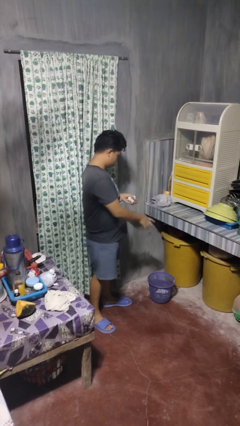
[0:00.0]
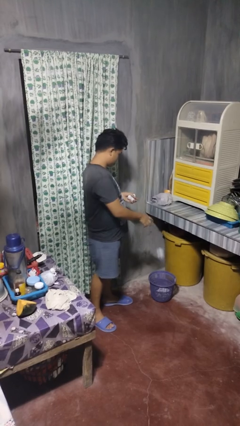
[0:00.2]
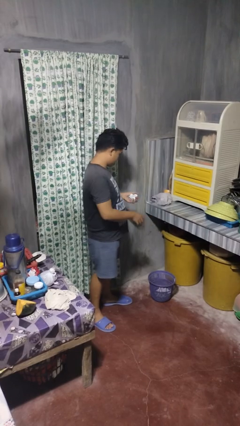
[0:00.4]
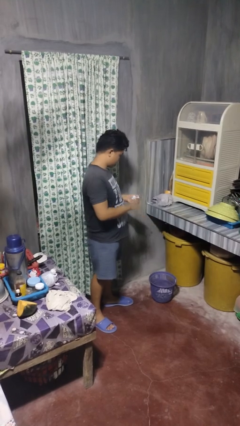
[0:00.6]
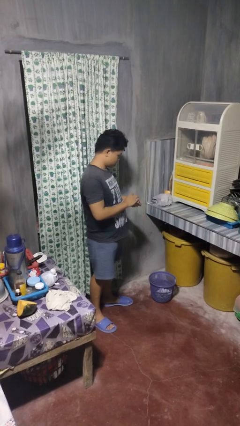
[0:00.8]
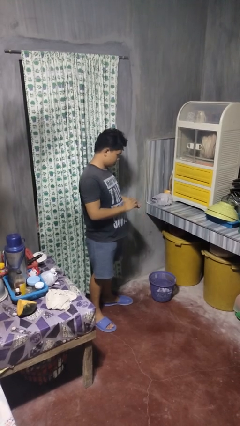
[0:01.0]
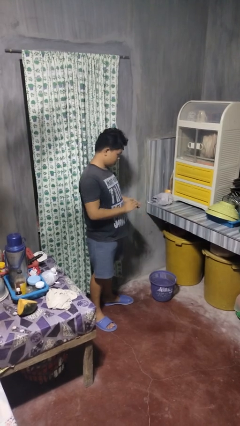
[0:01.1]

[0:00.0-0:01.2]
person discards trash

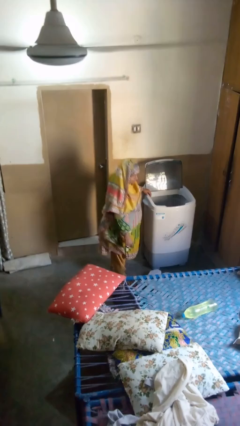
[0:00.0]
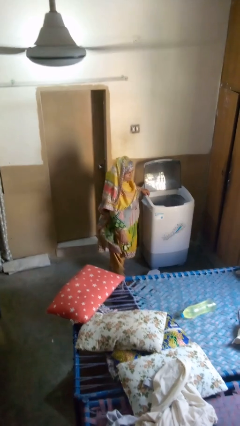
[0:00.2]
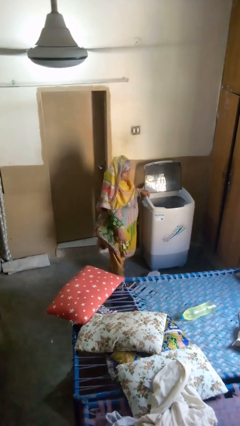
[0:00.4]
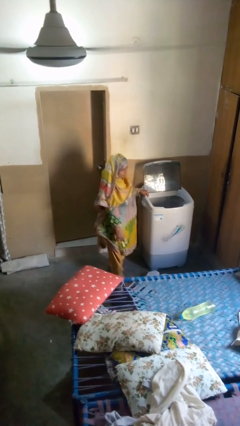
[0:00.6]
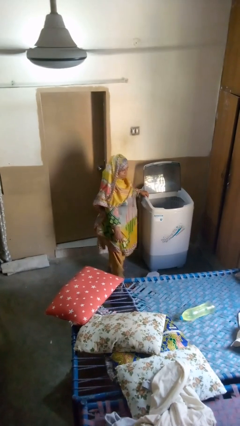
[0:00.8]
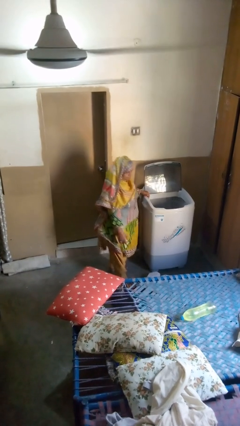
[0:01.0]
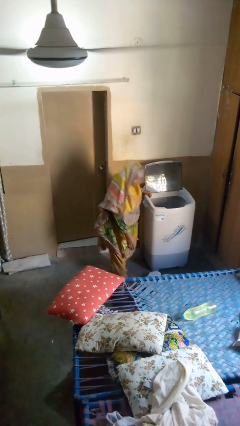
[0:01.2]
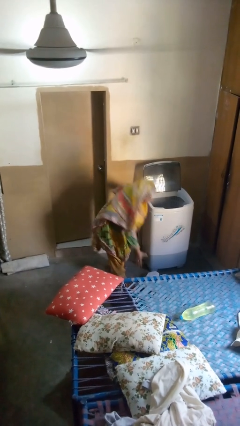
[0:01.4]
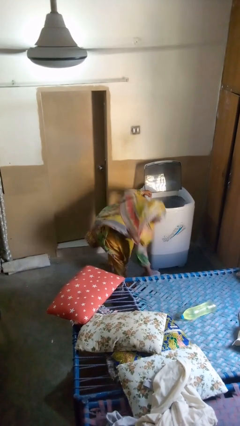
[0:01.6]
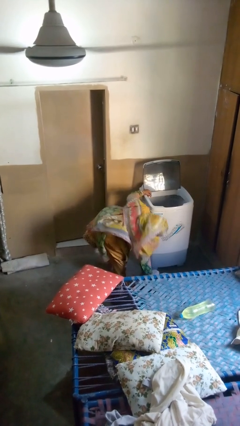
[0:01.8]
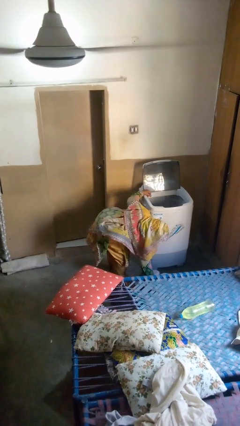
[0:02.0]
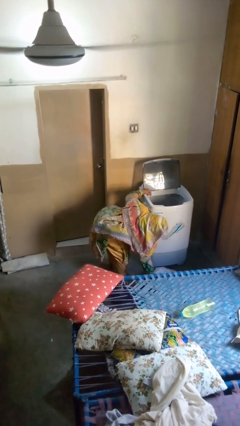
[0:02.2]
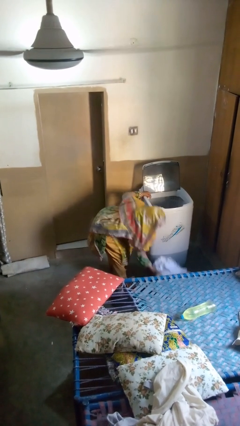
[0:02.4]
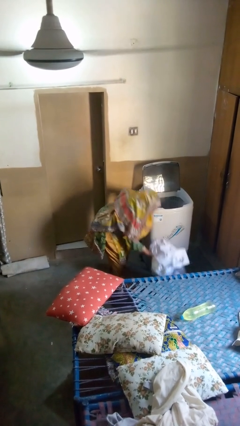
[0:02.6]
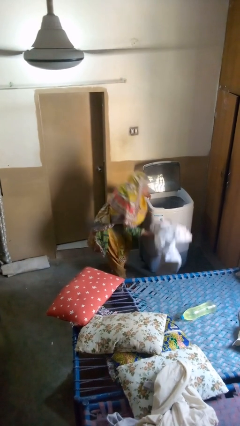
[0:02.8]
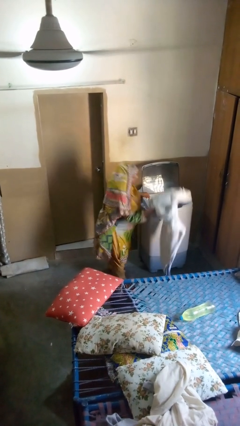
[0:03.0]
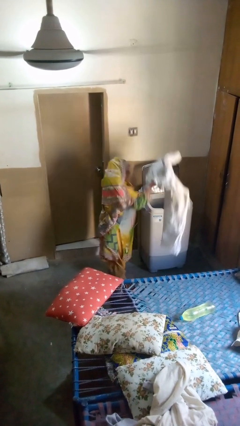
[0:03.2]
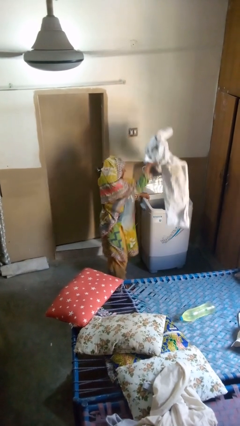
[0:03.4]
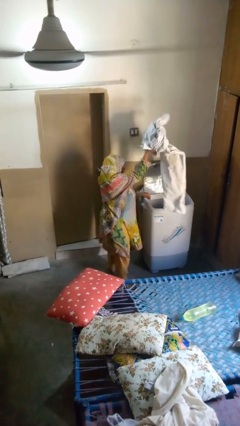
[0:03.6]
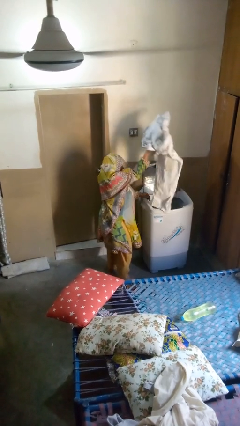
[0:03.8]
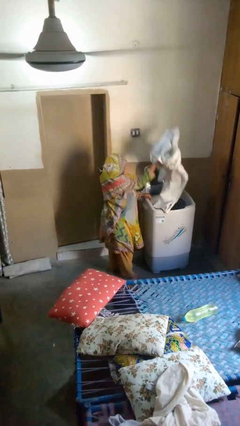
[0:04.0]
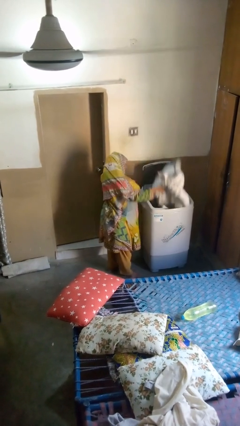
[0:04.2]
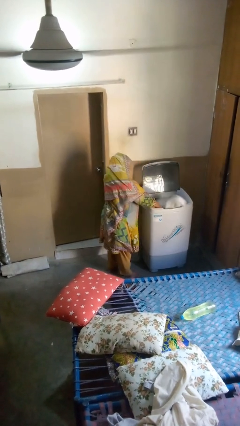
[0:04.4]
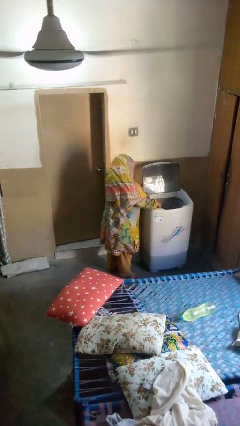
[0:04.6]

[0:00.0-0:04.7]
person loads clotheswasher

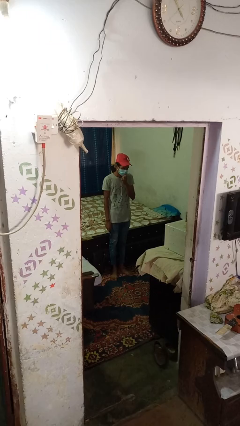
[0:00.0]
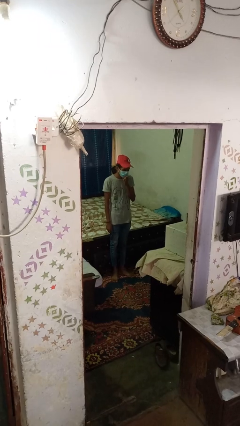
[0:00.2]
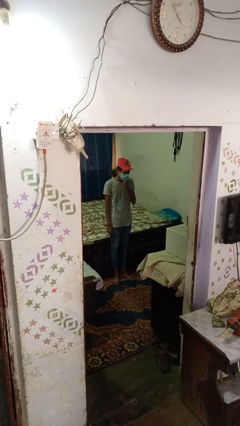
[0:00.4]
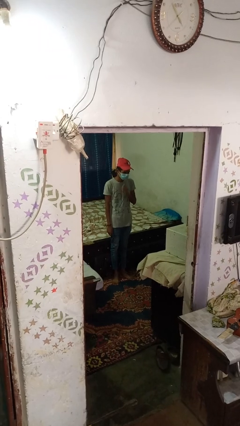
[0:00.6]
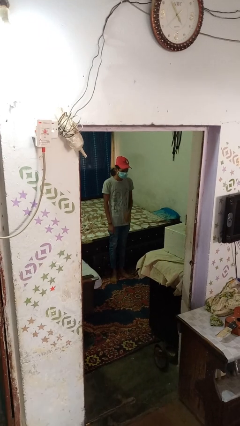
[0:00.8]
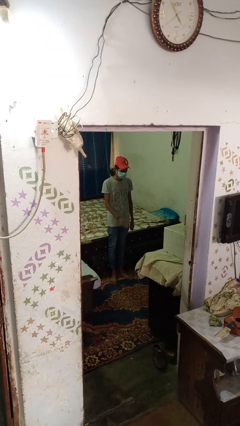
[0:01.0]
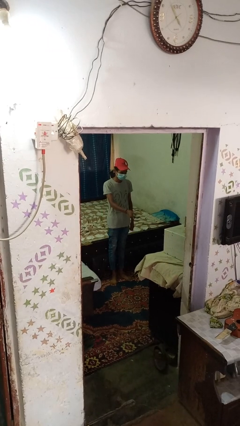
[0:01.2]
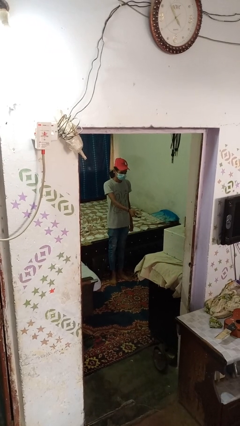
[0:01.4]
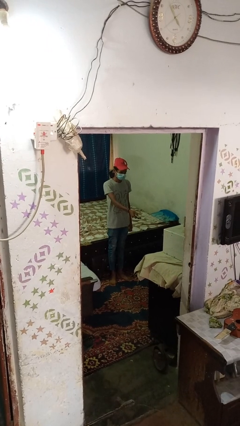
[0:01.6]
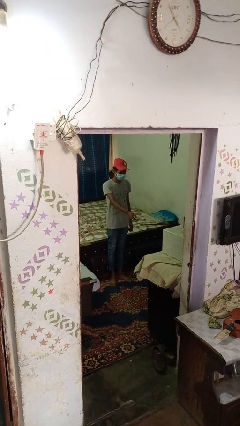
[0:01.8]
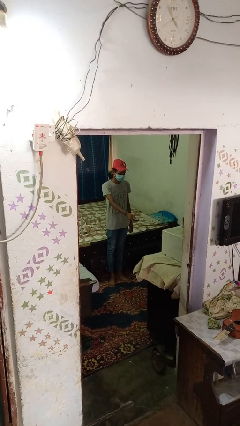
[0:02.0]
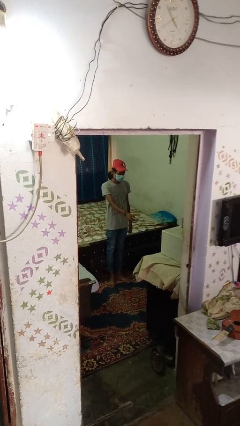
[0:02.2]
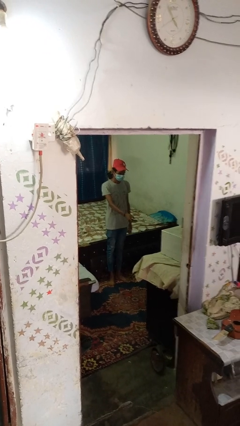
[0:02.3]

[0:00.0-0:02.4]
person uses television remote

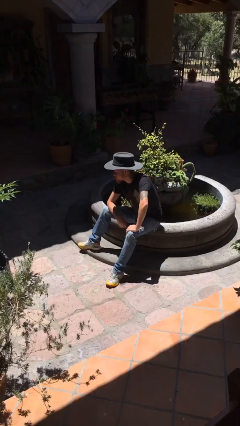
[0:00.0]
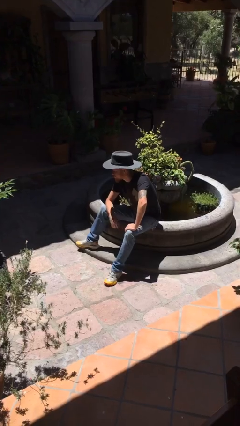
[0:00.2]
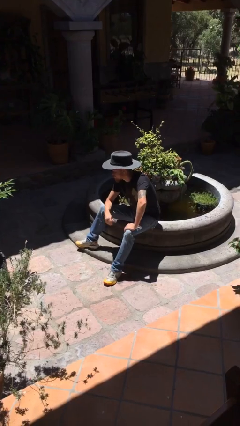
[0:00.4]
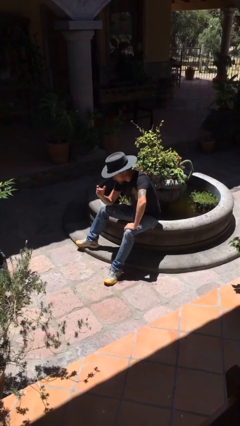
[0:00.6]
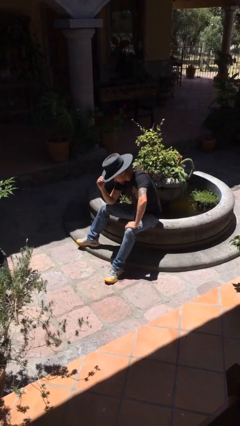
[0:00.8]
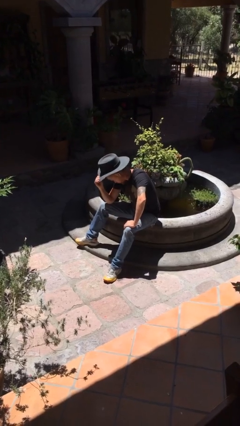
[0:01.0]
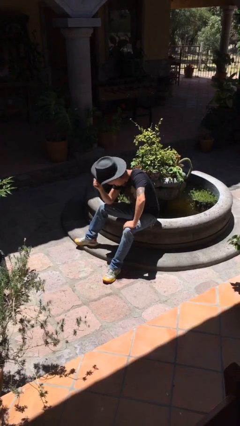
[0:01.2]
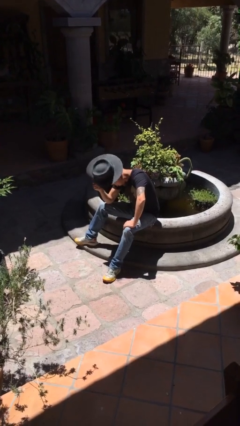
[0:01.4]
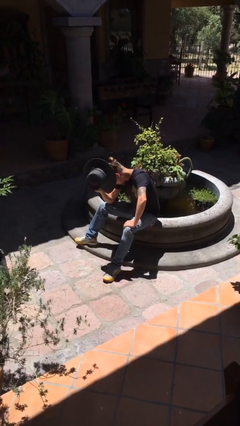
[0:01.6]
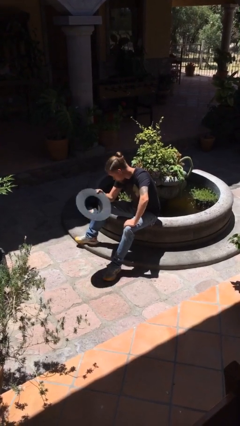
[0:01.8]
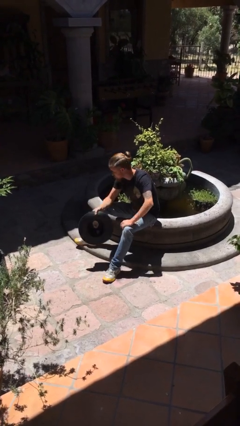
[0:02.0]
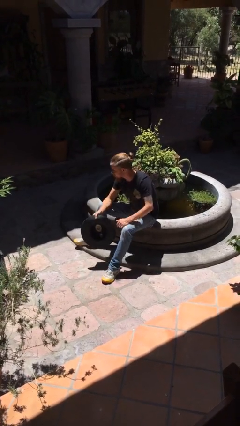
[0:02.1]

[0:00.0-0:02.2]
person takes off hat

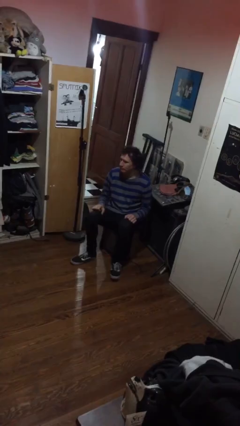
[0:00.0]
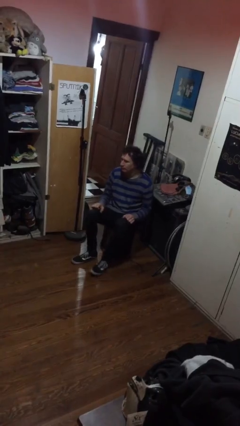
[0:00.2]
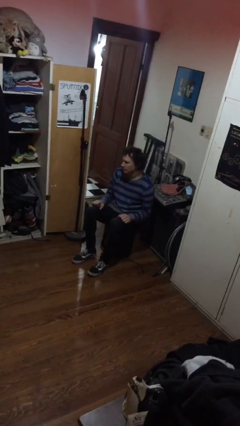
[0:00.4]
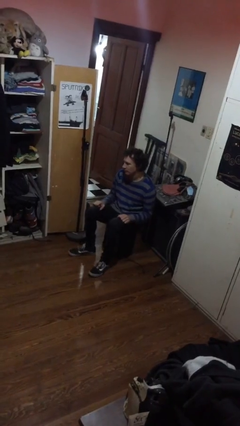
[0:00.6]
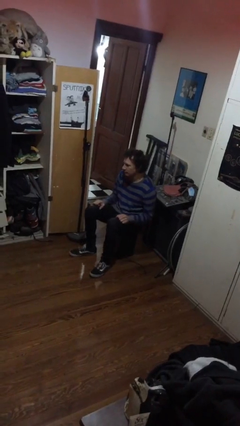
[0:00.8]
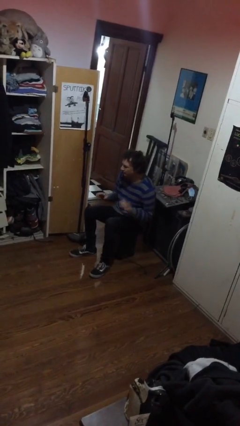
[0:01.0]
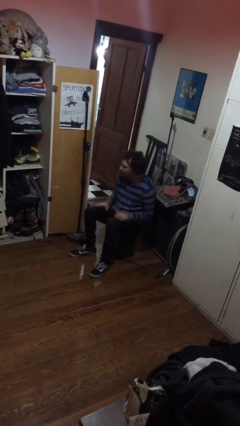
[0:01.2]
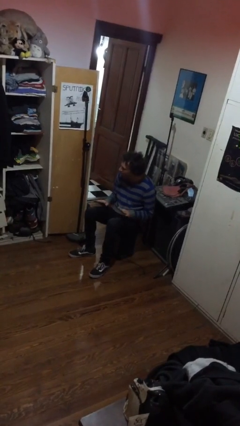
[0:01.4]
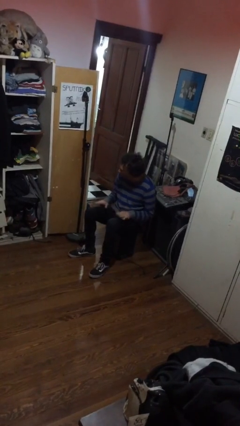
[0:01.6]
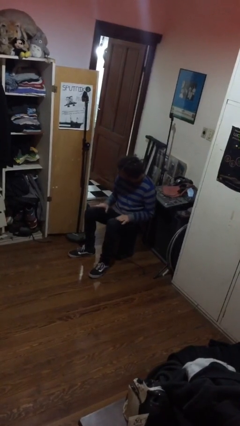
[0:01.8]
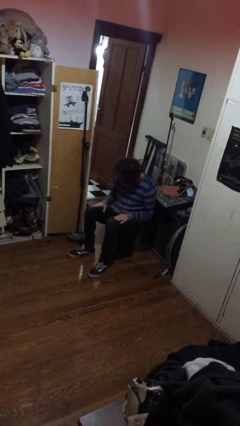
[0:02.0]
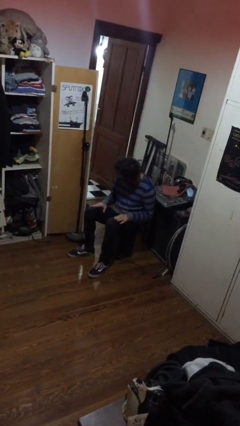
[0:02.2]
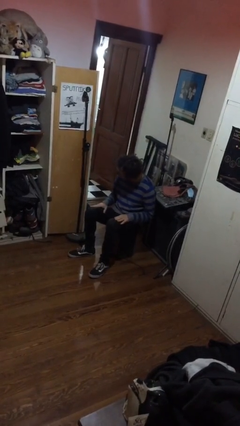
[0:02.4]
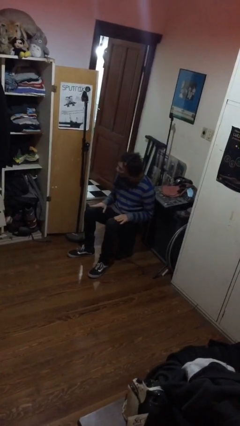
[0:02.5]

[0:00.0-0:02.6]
person slaps hands on thighs

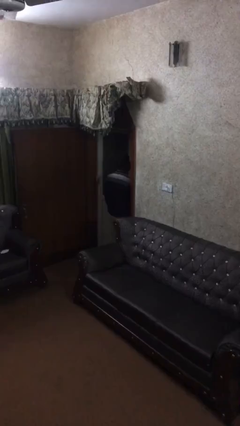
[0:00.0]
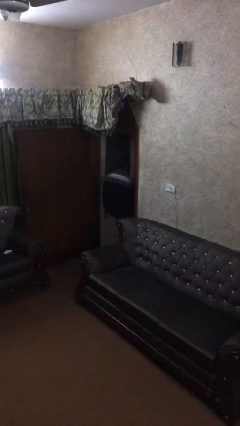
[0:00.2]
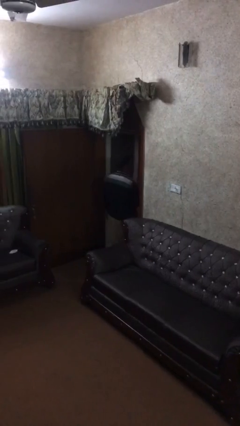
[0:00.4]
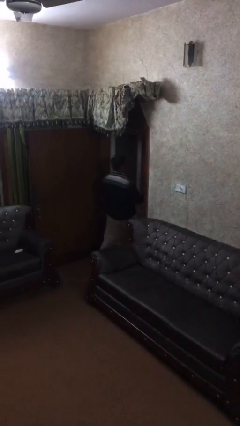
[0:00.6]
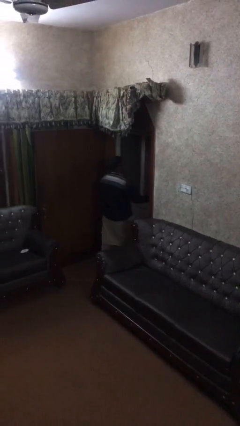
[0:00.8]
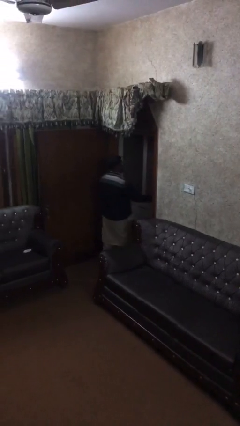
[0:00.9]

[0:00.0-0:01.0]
person closes facility door

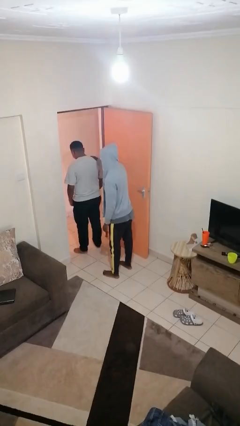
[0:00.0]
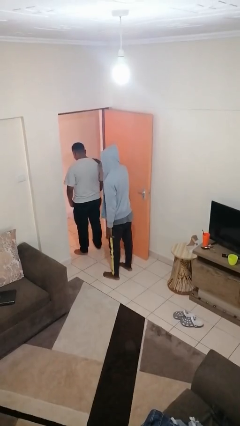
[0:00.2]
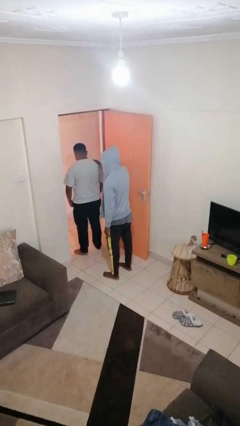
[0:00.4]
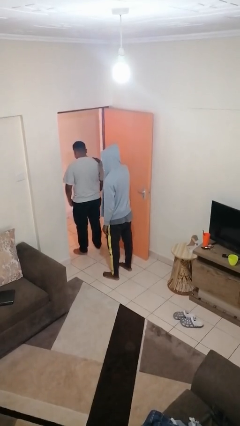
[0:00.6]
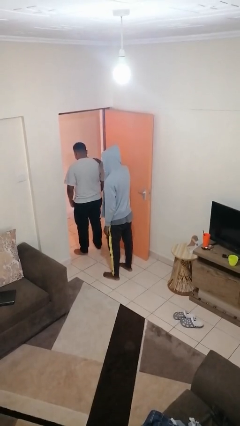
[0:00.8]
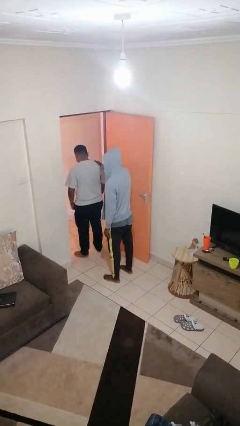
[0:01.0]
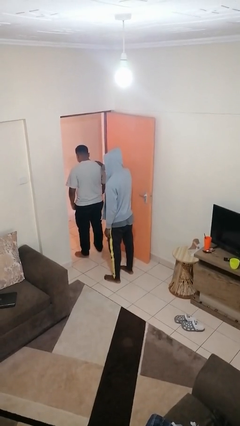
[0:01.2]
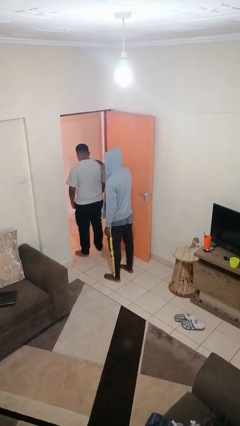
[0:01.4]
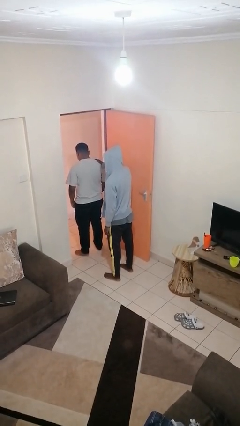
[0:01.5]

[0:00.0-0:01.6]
person grabs person by shoulder

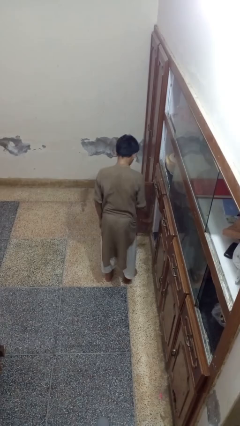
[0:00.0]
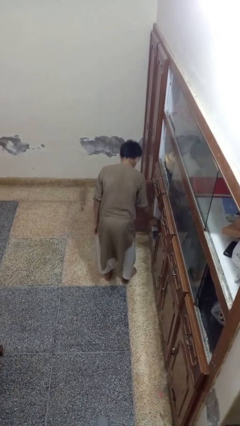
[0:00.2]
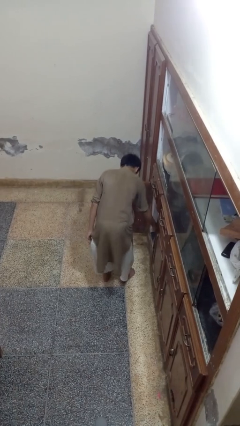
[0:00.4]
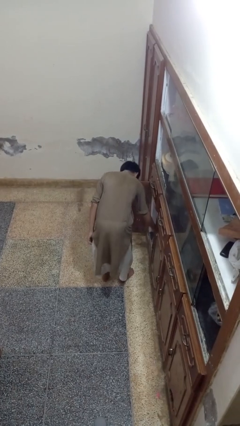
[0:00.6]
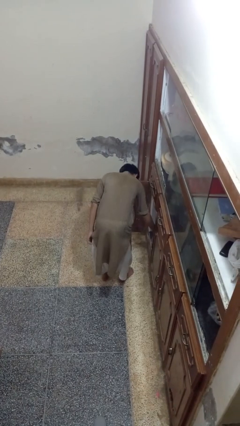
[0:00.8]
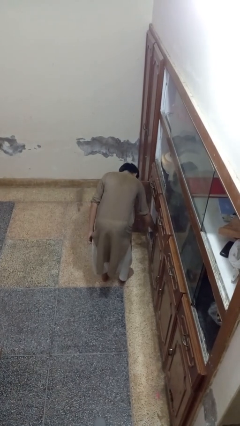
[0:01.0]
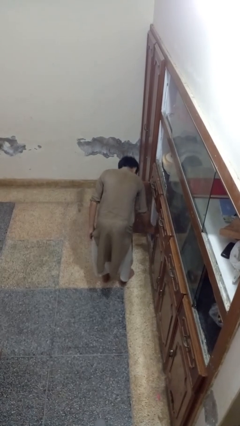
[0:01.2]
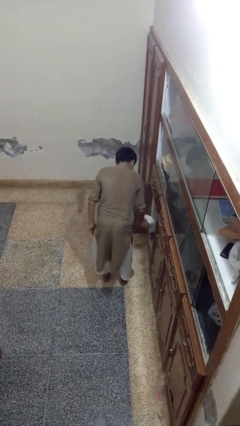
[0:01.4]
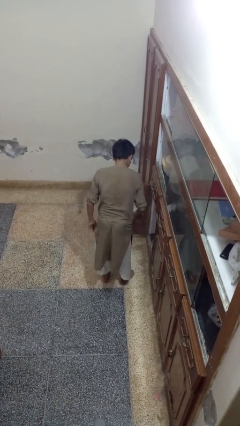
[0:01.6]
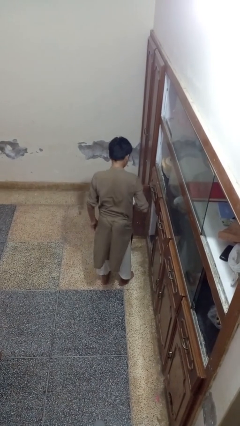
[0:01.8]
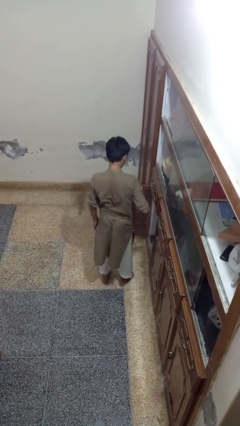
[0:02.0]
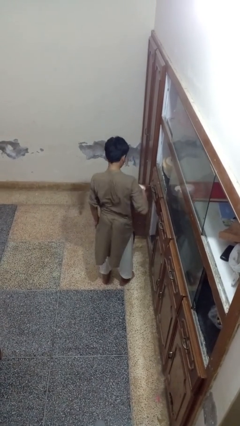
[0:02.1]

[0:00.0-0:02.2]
person takes object from cabinet
